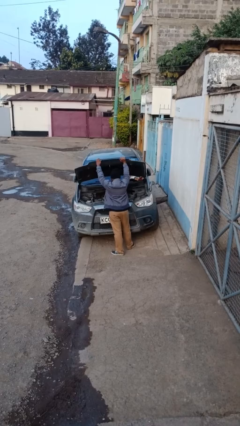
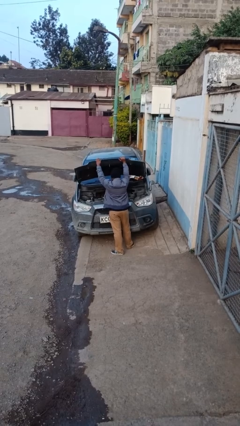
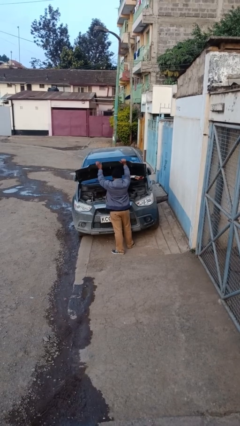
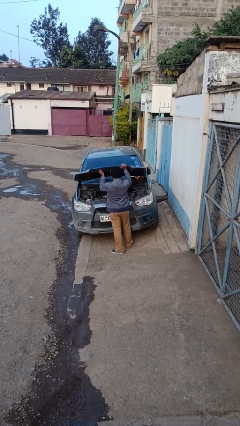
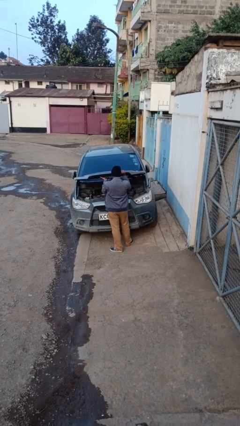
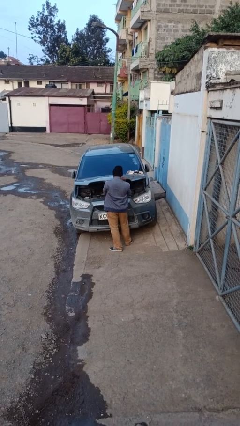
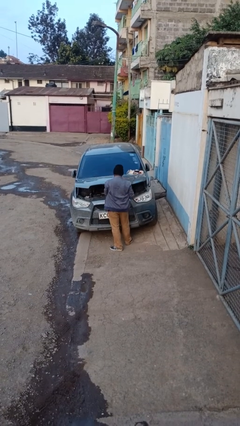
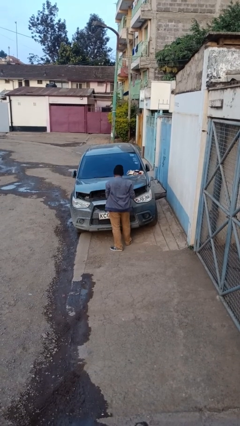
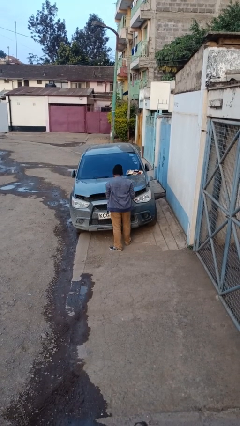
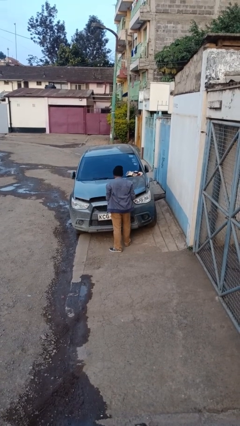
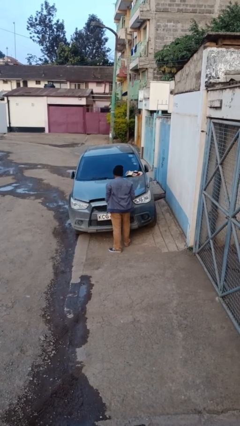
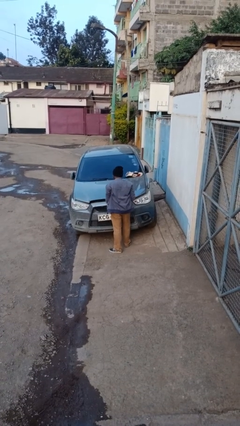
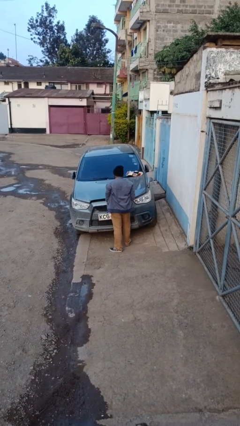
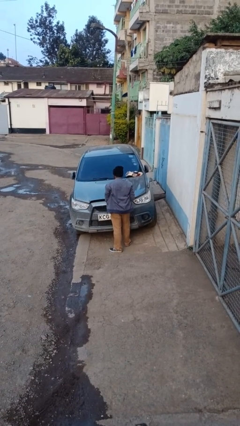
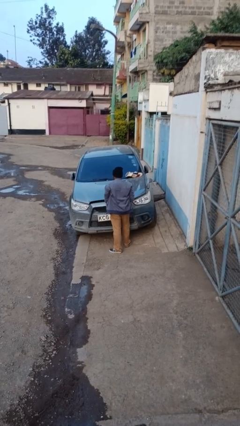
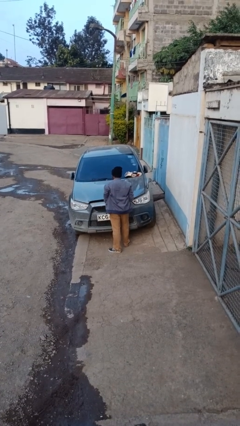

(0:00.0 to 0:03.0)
person closes car hood

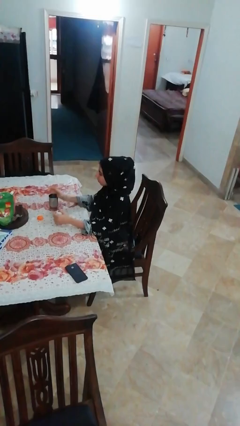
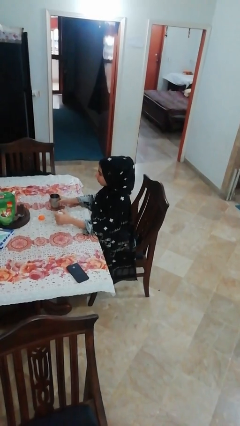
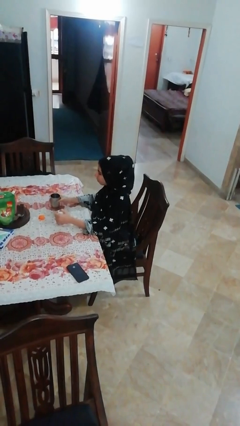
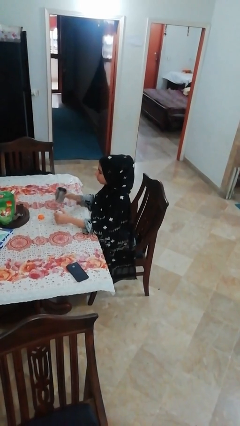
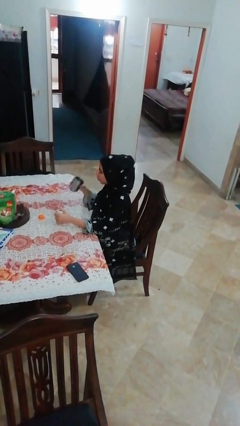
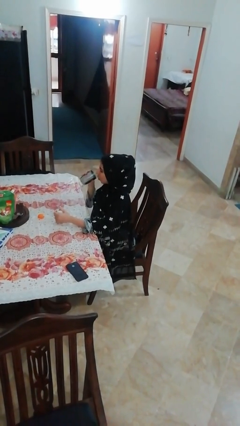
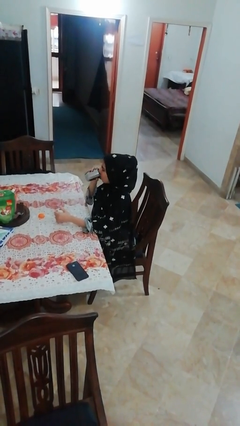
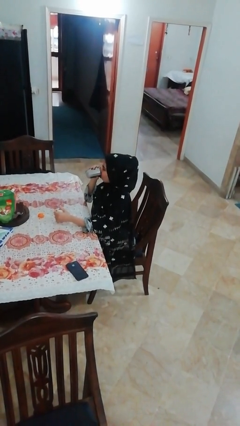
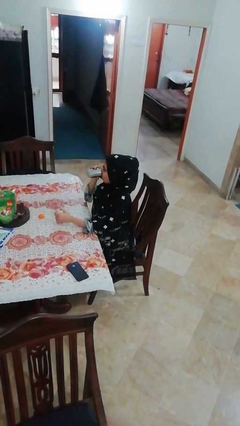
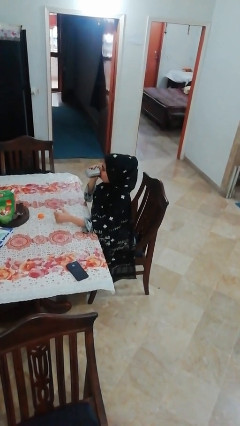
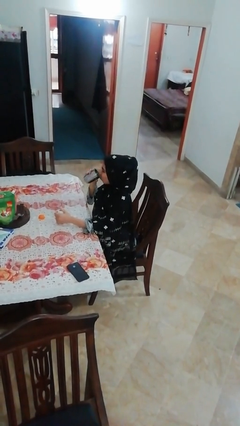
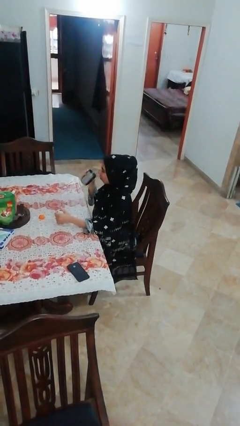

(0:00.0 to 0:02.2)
person drinks from cup

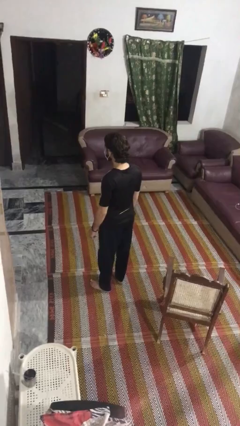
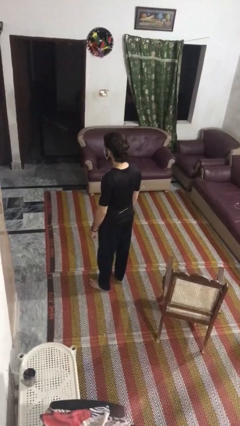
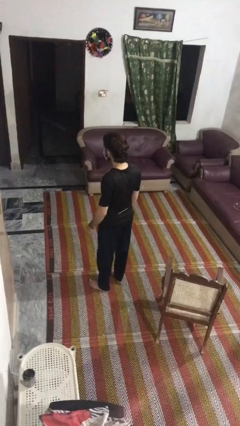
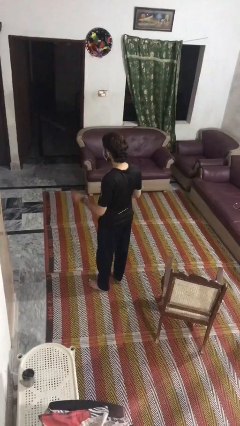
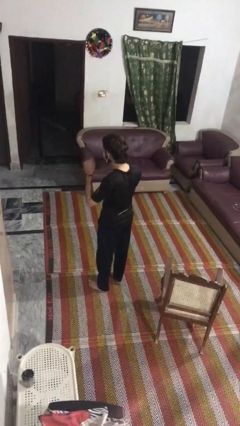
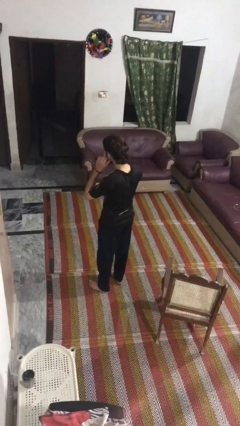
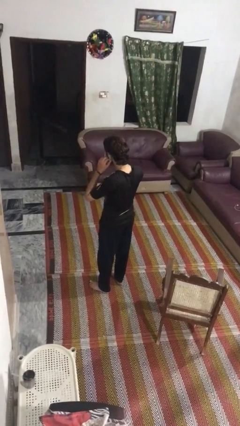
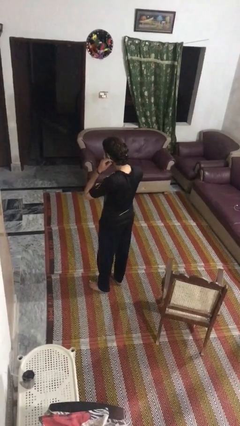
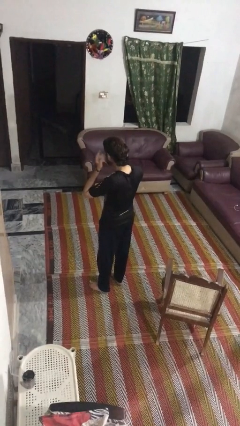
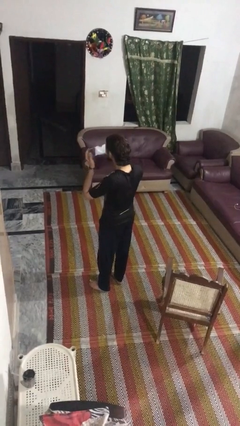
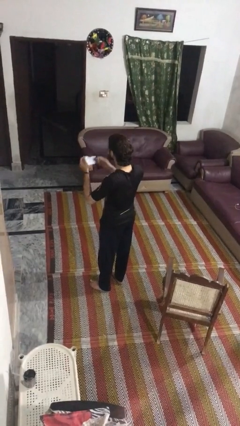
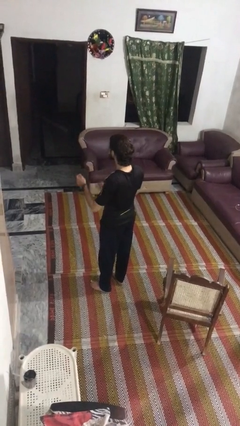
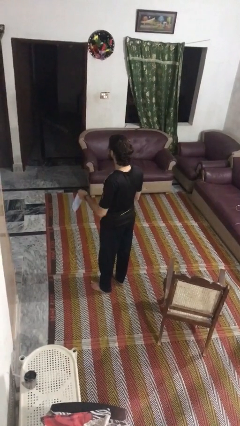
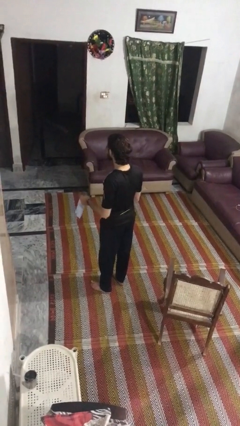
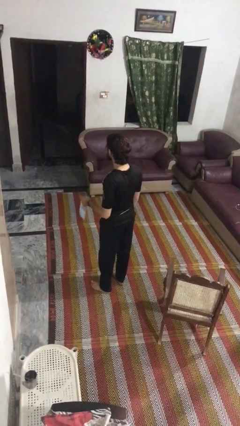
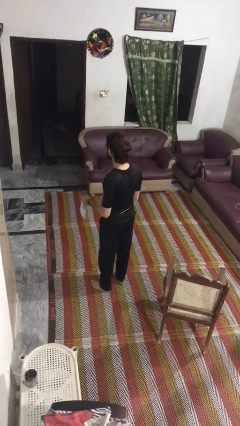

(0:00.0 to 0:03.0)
person takes off facemask

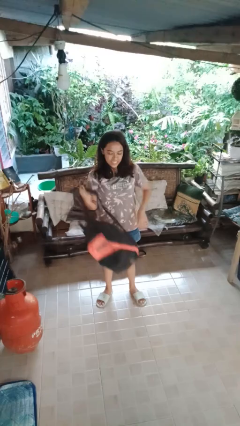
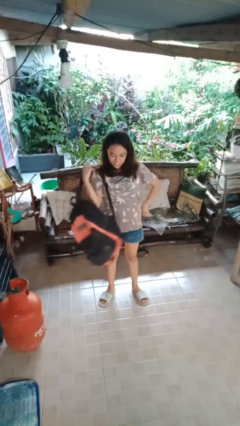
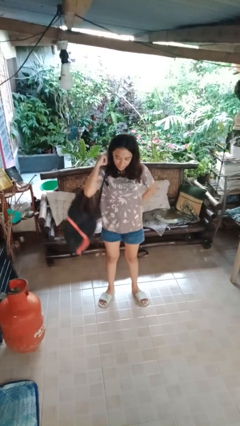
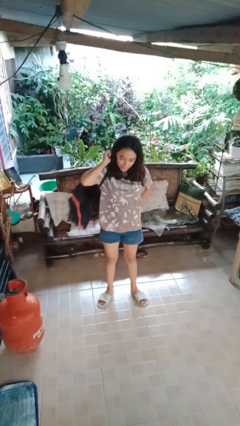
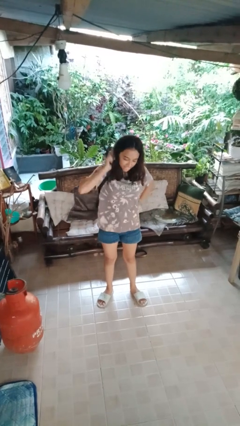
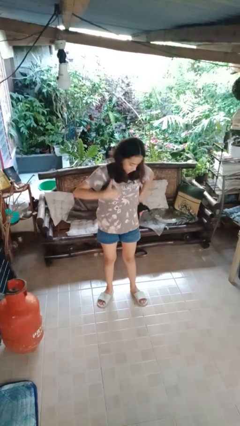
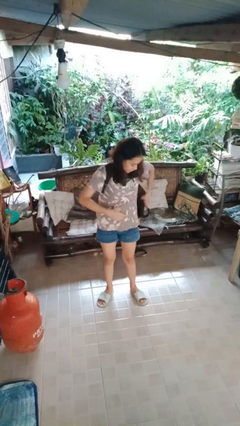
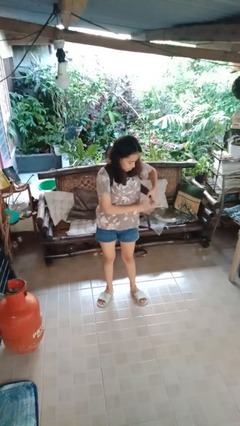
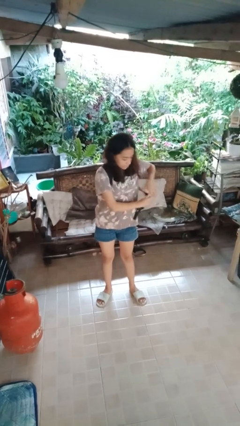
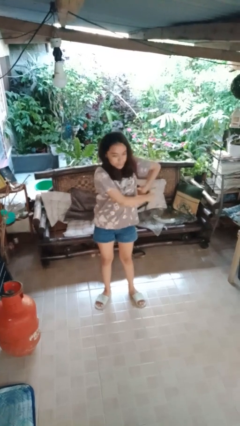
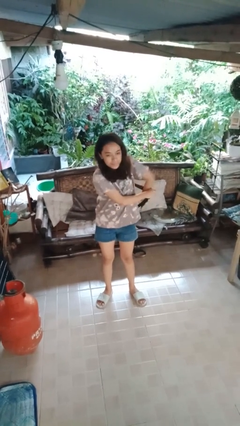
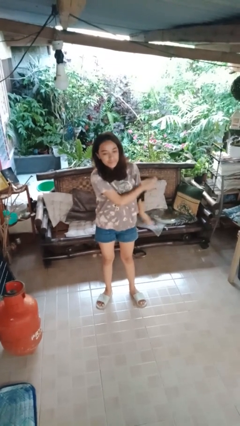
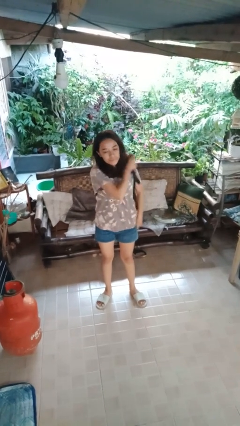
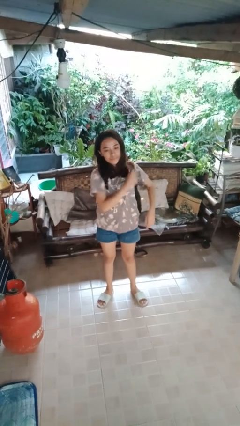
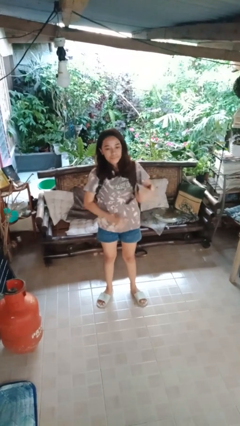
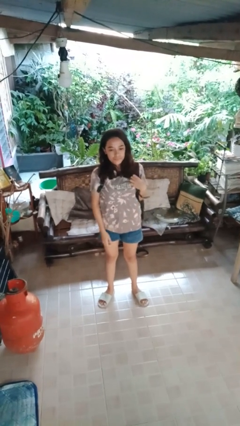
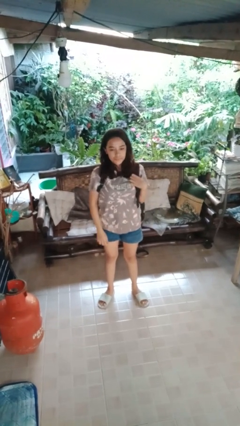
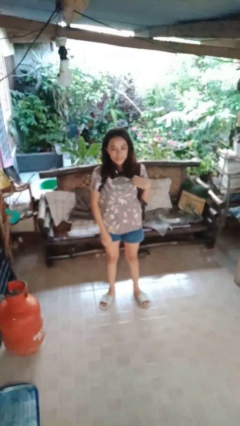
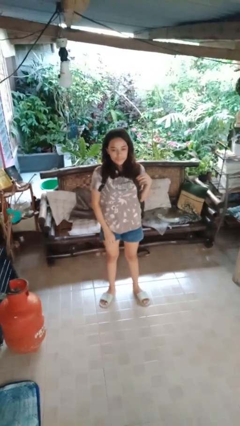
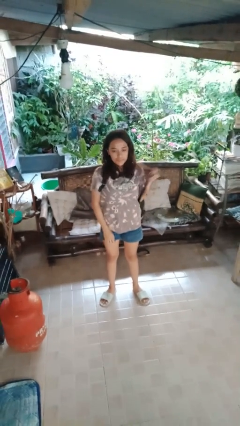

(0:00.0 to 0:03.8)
person puts on backpack

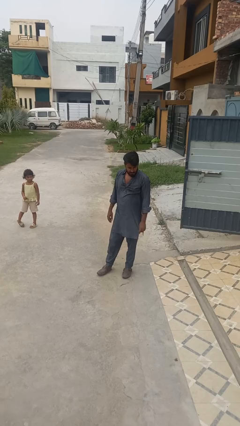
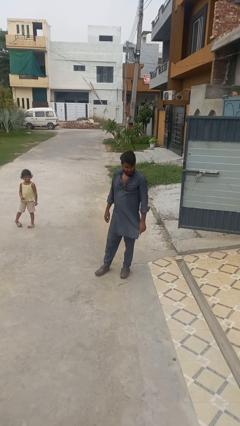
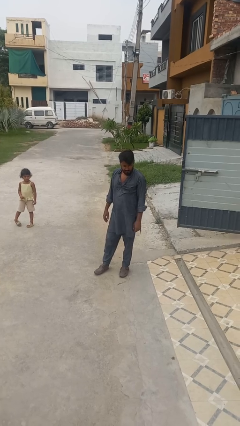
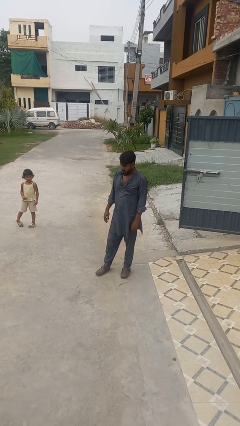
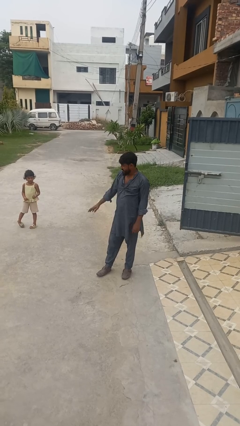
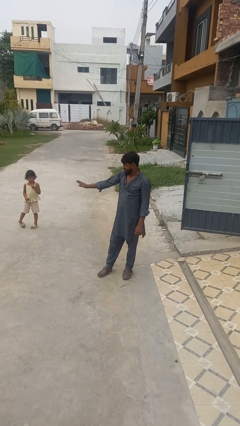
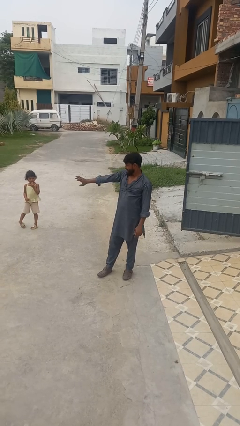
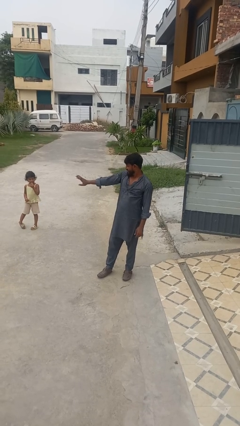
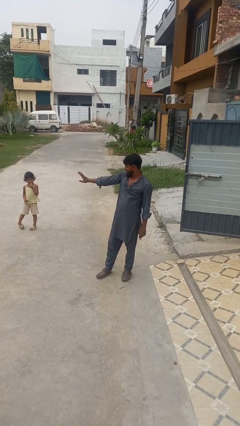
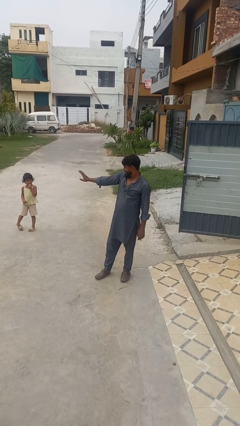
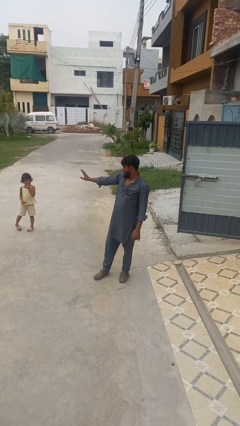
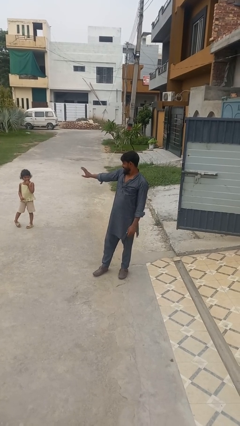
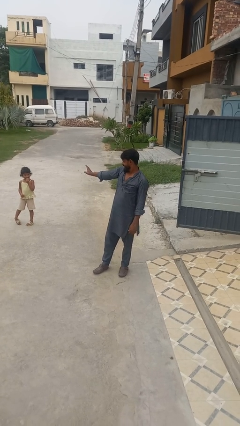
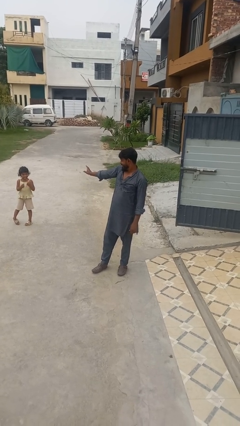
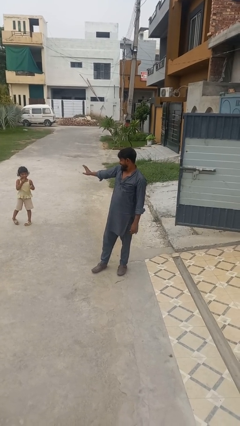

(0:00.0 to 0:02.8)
person waves at person

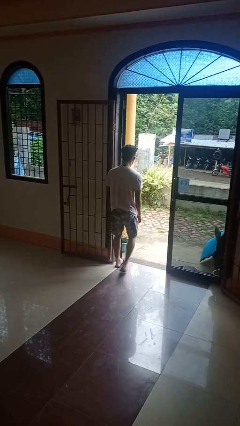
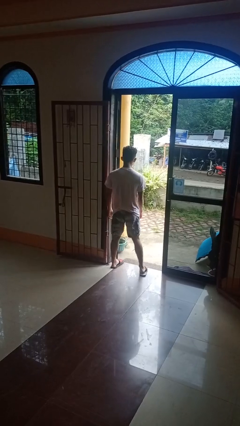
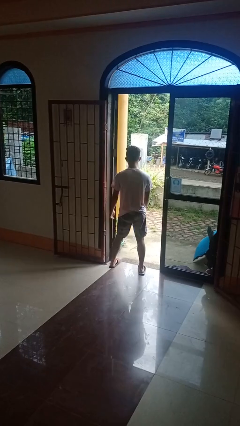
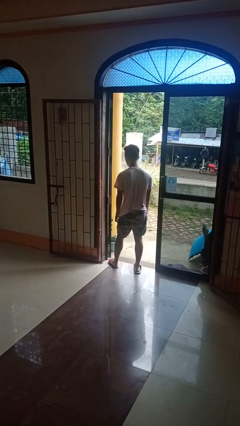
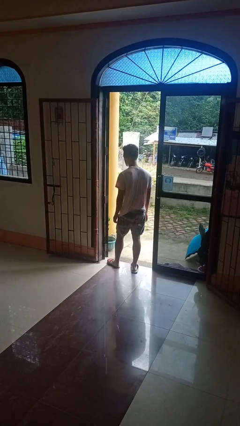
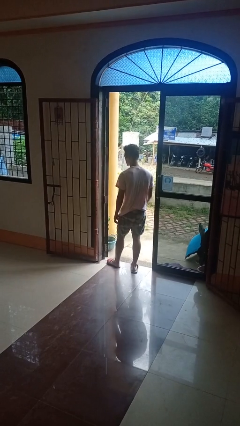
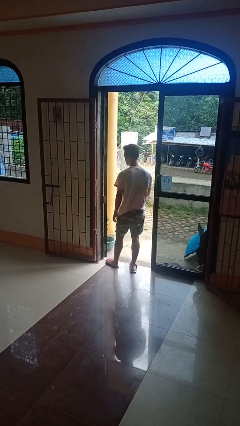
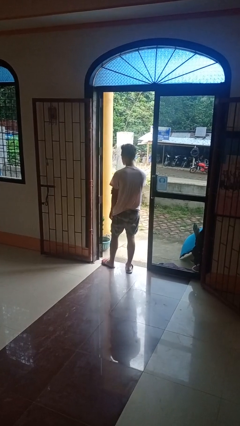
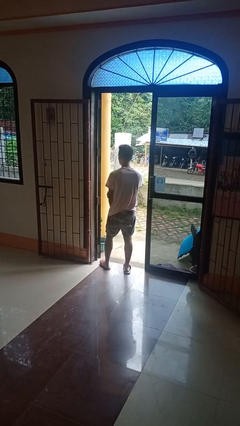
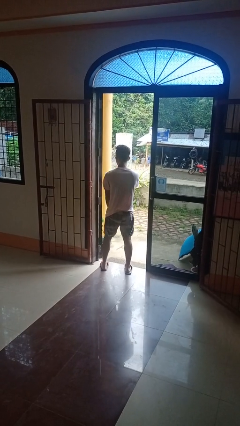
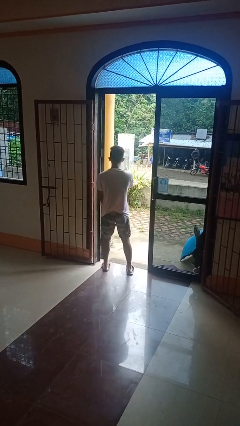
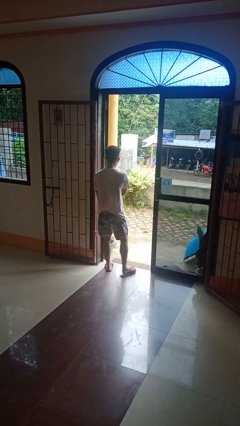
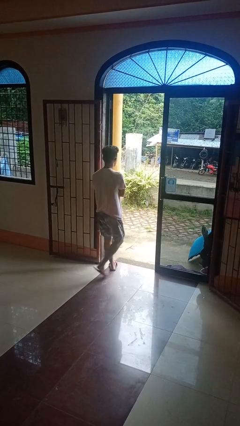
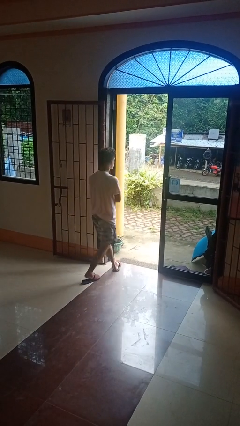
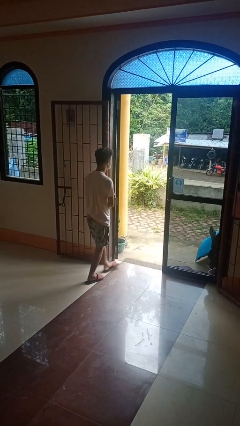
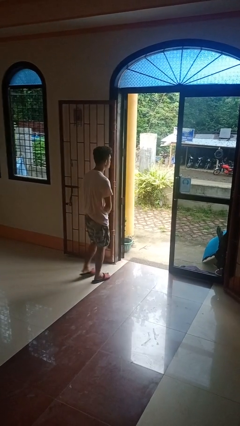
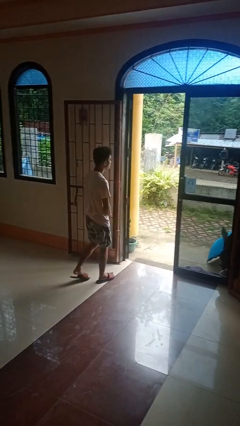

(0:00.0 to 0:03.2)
person bumps into wall
